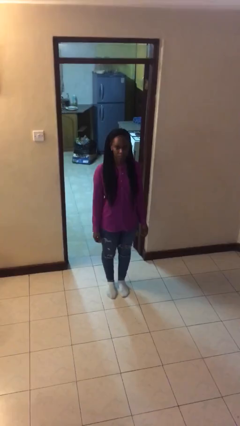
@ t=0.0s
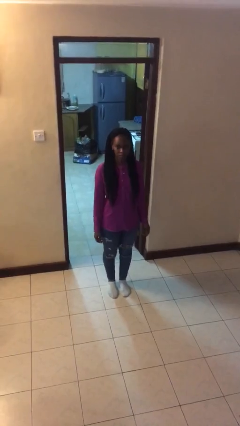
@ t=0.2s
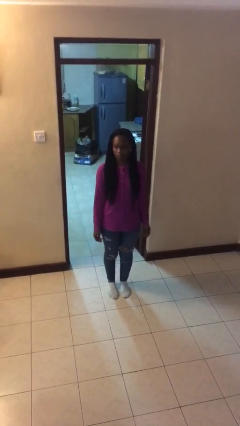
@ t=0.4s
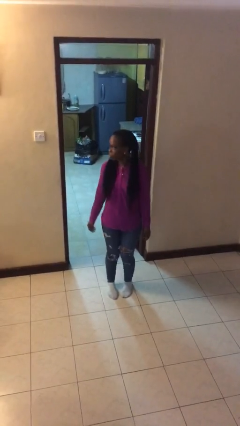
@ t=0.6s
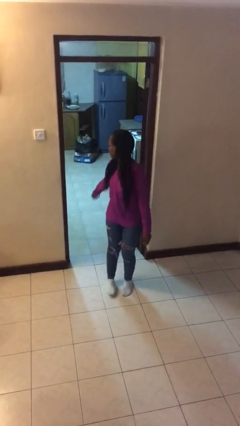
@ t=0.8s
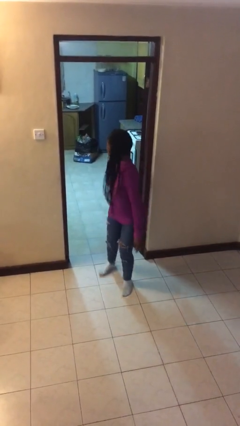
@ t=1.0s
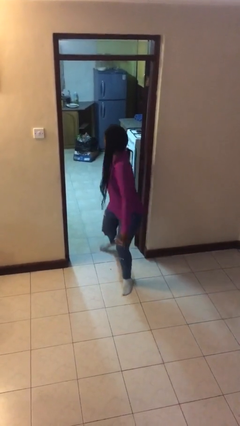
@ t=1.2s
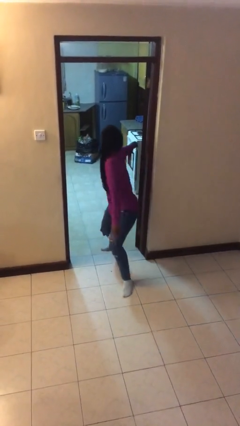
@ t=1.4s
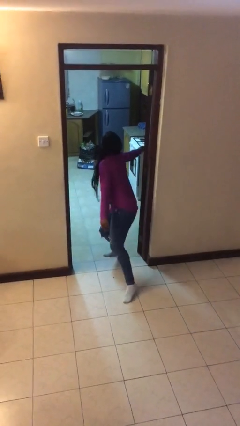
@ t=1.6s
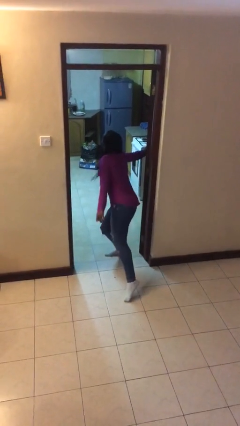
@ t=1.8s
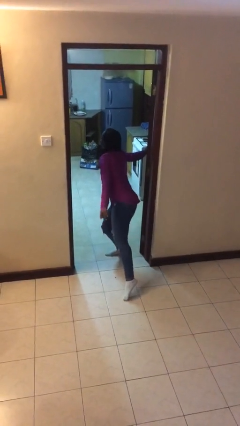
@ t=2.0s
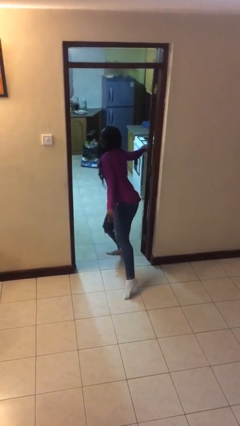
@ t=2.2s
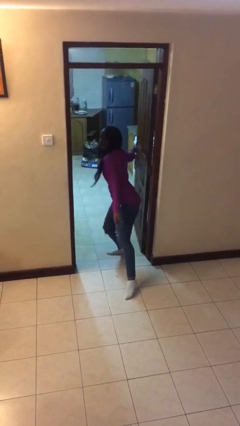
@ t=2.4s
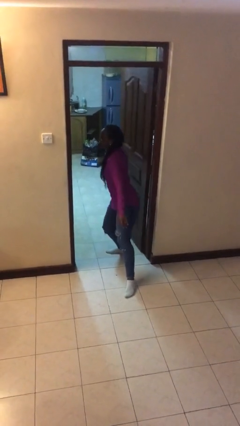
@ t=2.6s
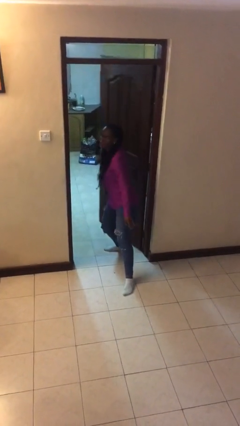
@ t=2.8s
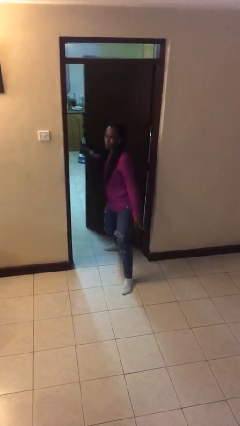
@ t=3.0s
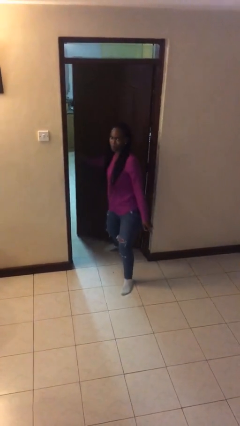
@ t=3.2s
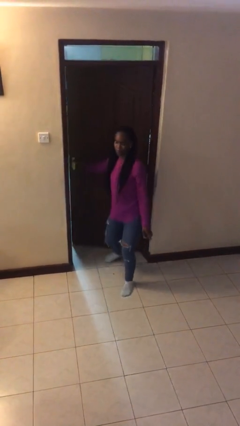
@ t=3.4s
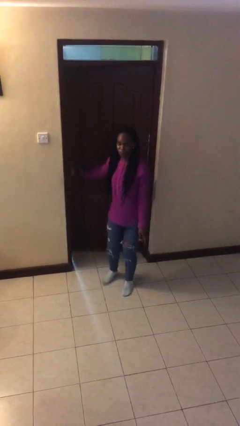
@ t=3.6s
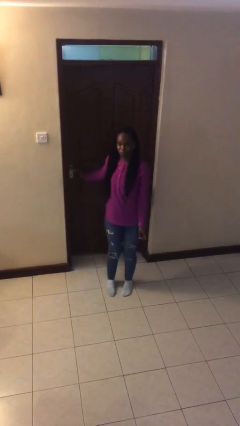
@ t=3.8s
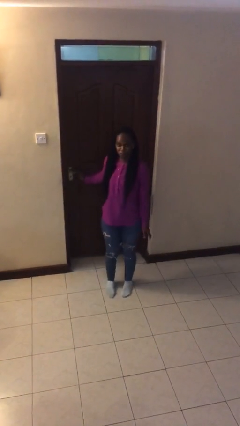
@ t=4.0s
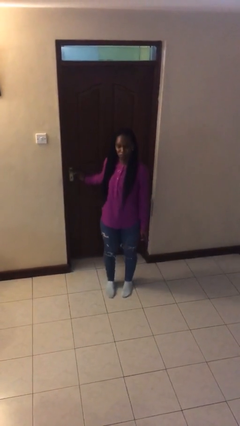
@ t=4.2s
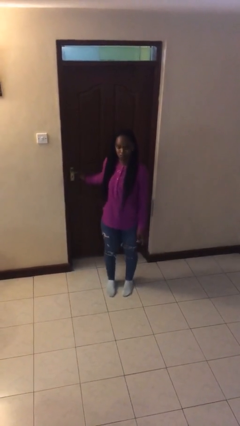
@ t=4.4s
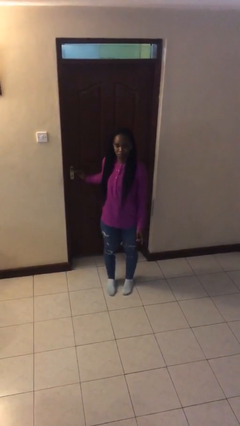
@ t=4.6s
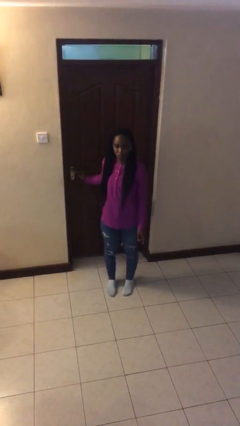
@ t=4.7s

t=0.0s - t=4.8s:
person closes facility door

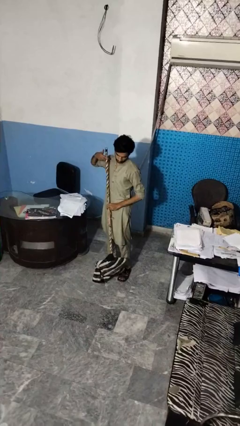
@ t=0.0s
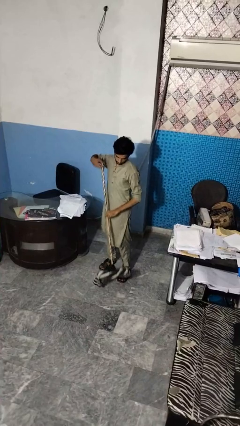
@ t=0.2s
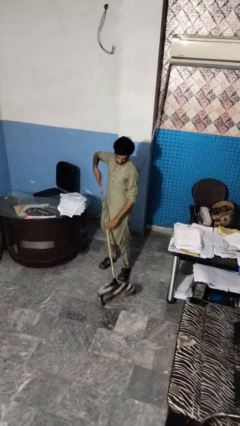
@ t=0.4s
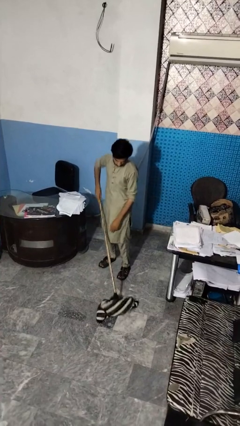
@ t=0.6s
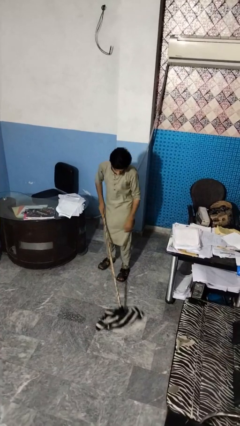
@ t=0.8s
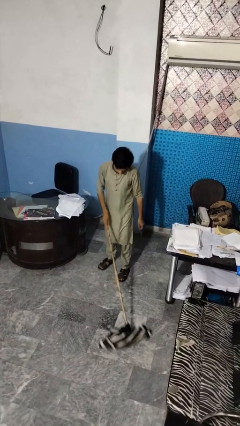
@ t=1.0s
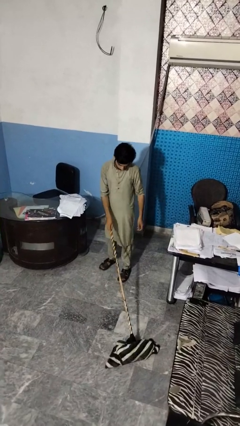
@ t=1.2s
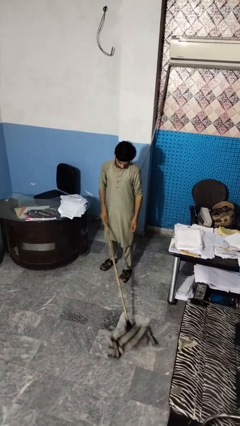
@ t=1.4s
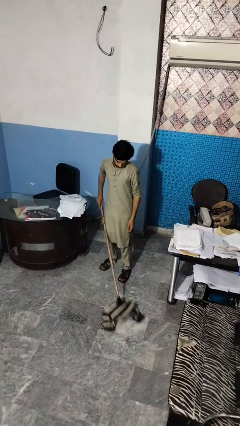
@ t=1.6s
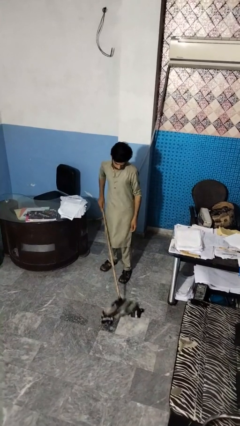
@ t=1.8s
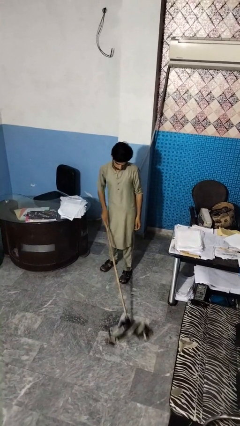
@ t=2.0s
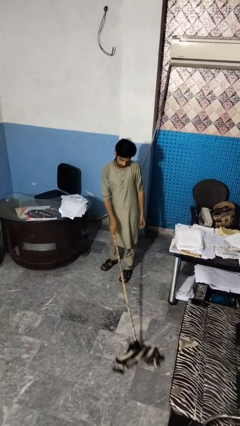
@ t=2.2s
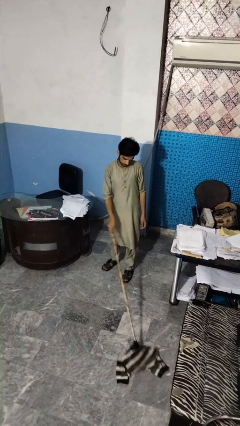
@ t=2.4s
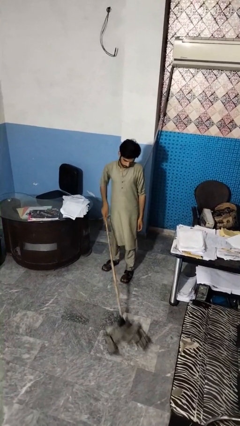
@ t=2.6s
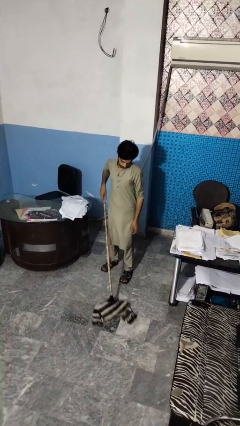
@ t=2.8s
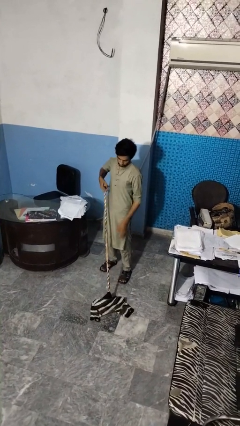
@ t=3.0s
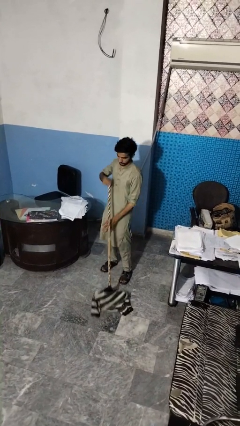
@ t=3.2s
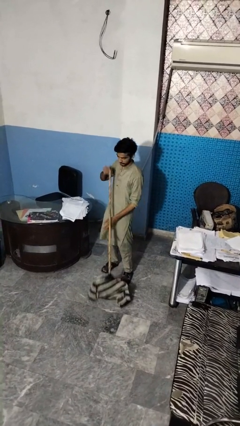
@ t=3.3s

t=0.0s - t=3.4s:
person mops

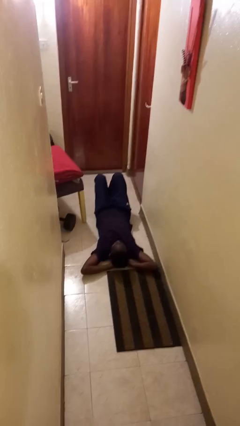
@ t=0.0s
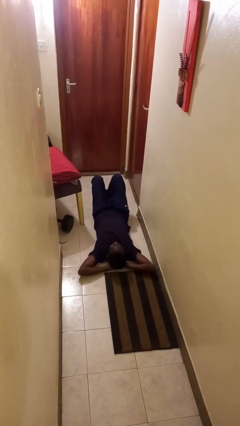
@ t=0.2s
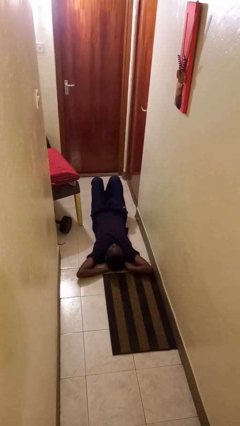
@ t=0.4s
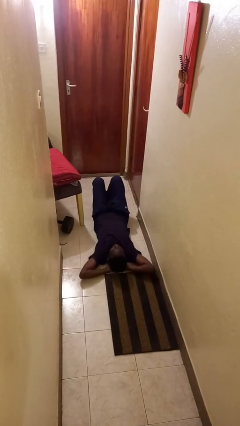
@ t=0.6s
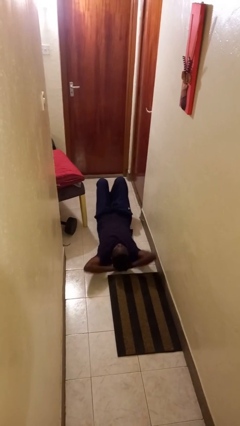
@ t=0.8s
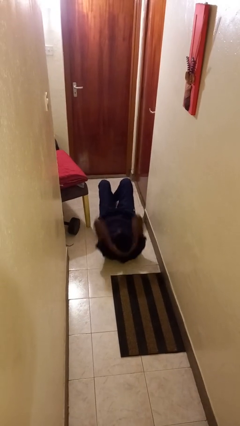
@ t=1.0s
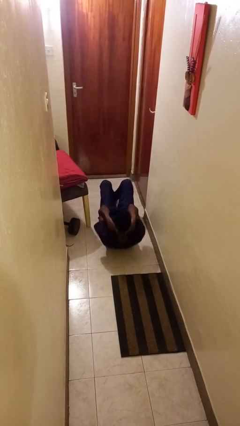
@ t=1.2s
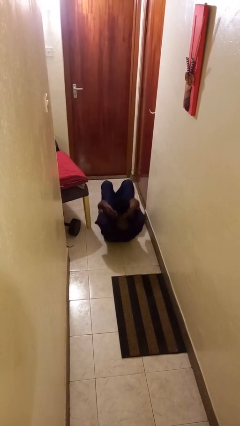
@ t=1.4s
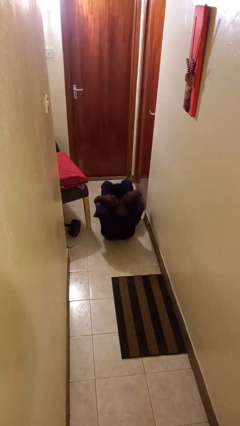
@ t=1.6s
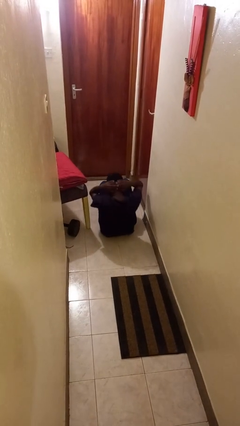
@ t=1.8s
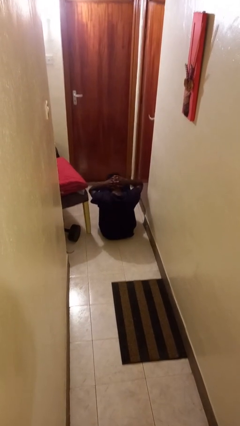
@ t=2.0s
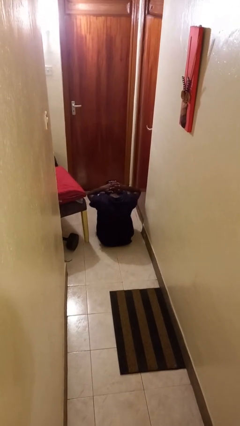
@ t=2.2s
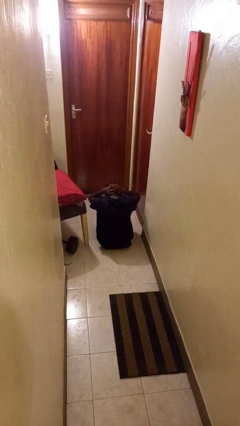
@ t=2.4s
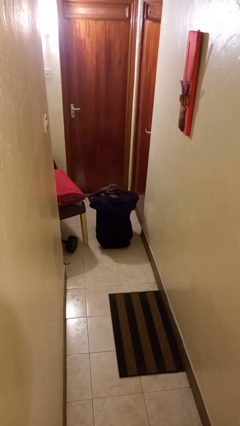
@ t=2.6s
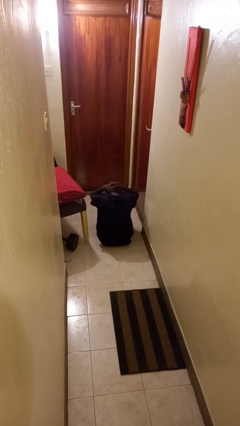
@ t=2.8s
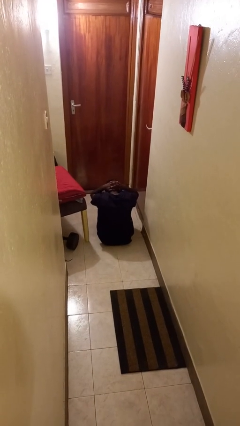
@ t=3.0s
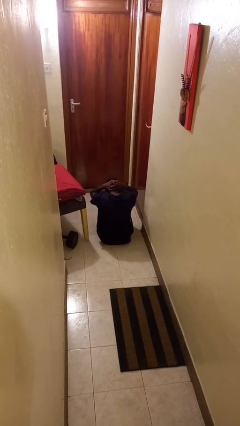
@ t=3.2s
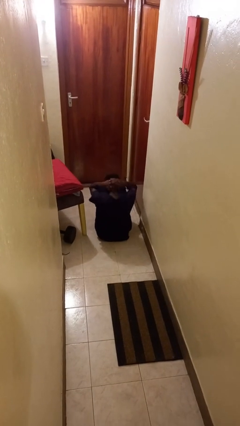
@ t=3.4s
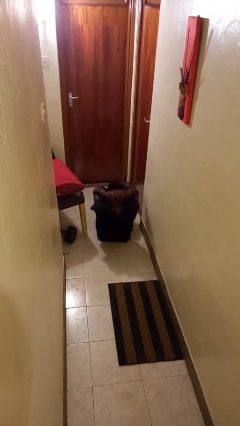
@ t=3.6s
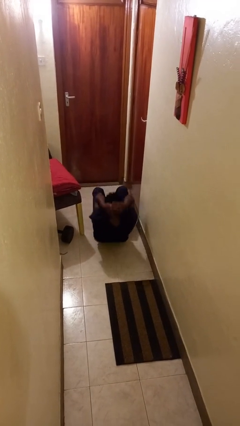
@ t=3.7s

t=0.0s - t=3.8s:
person exercises with situp

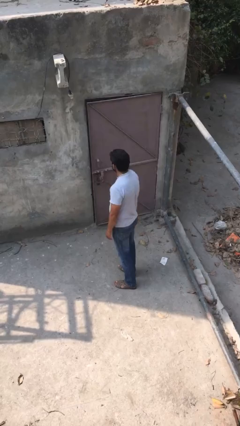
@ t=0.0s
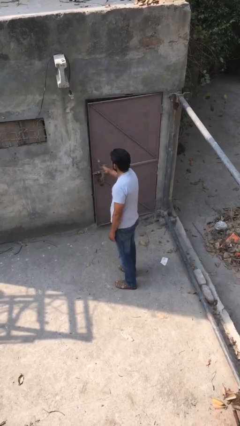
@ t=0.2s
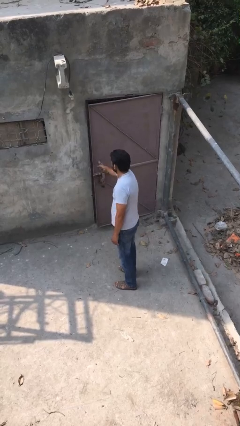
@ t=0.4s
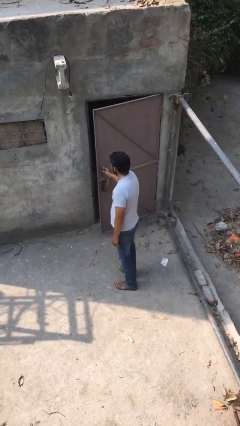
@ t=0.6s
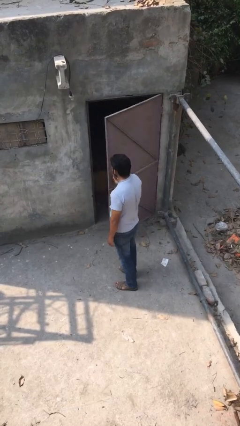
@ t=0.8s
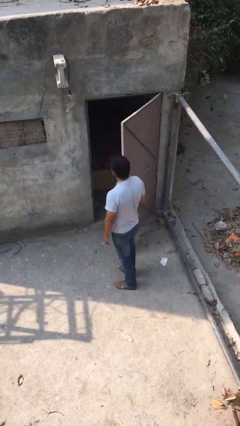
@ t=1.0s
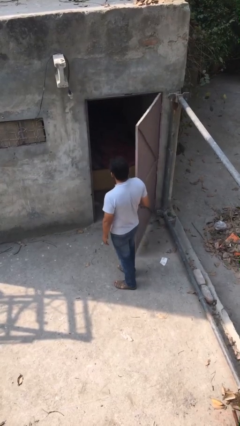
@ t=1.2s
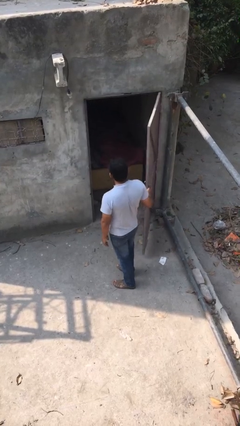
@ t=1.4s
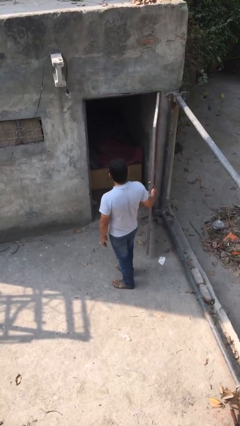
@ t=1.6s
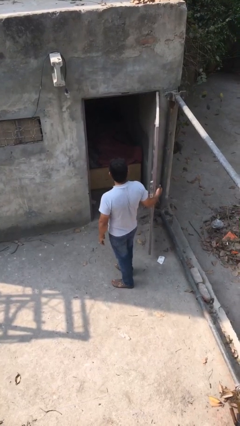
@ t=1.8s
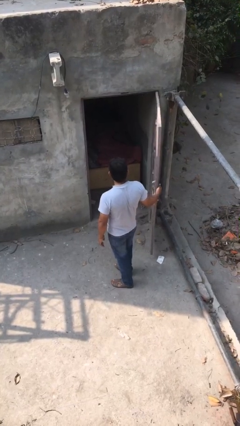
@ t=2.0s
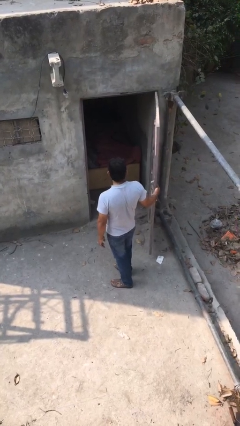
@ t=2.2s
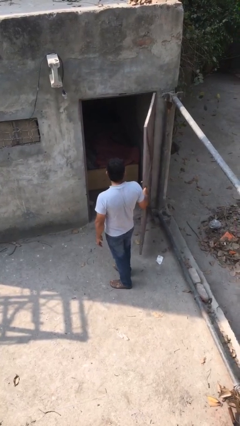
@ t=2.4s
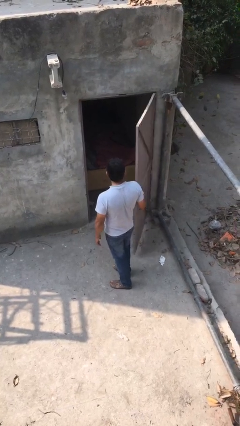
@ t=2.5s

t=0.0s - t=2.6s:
person opens facility door

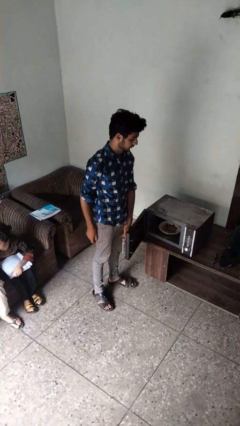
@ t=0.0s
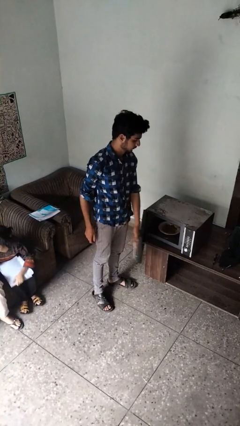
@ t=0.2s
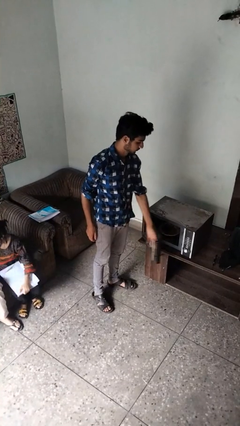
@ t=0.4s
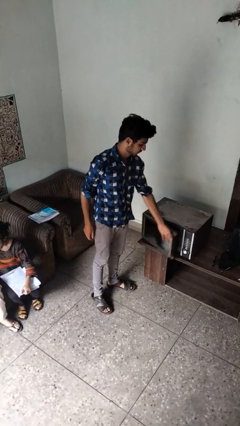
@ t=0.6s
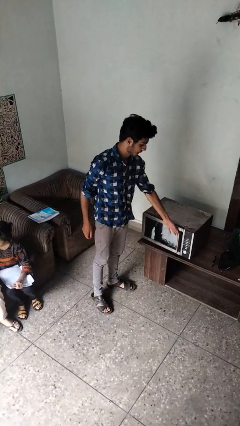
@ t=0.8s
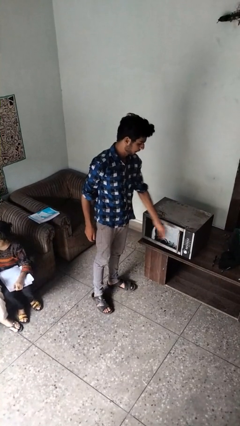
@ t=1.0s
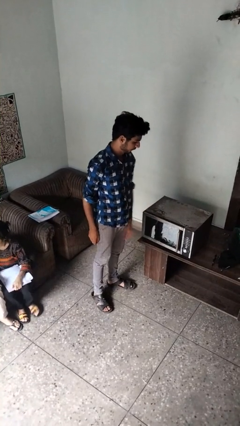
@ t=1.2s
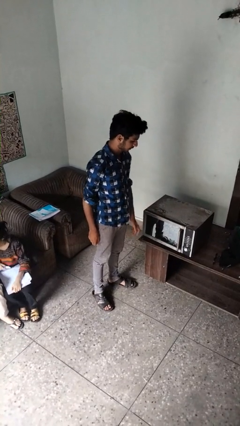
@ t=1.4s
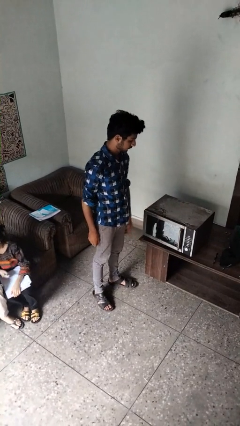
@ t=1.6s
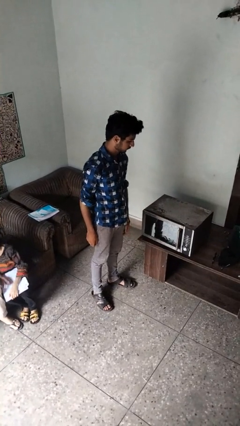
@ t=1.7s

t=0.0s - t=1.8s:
person closes microwave

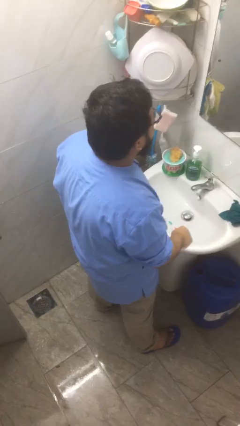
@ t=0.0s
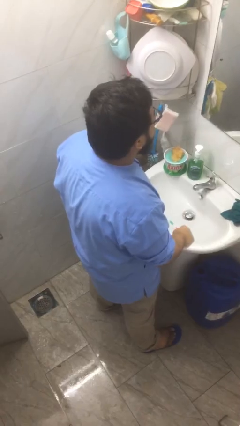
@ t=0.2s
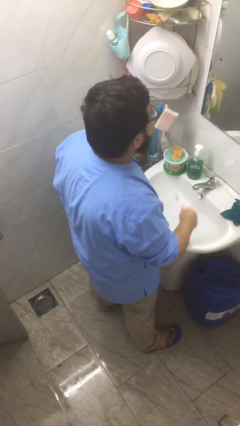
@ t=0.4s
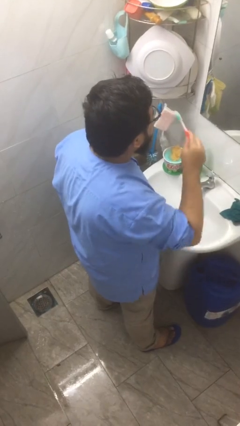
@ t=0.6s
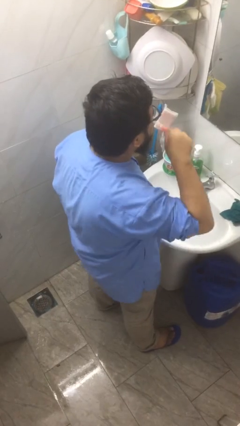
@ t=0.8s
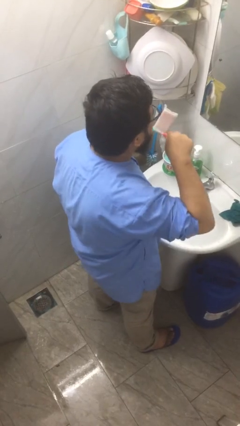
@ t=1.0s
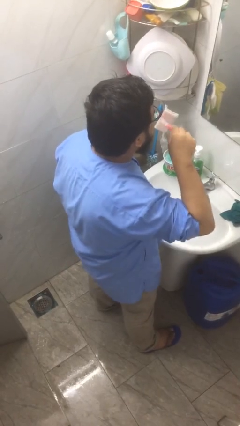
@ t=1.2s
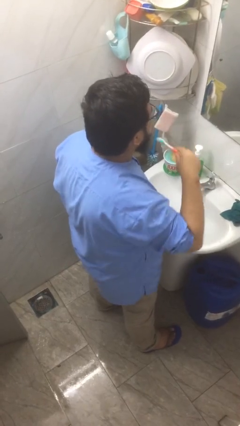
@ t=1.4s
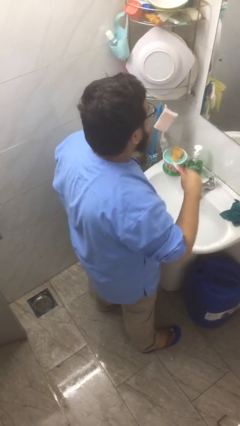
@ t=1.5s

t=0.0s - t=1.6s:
person brushes teeth
